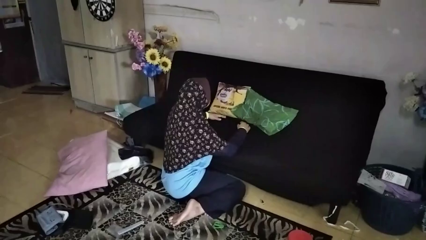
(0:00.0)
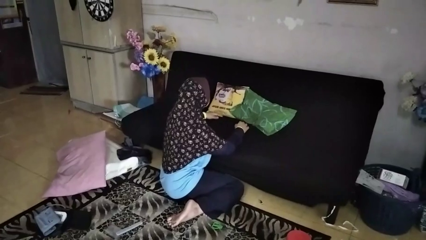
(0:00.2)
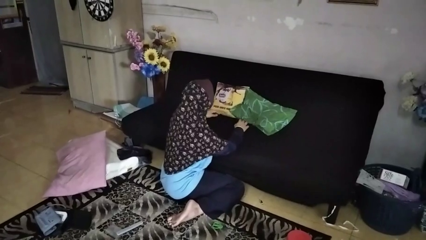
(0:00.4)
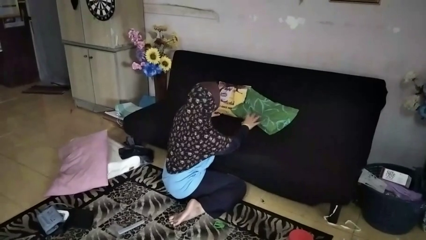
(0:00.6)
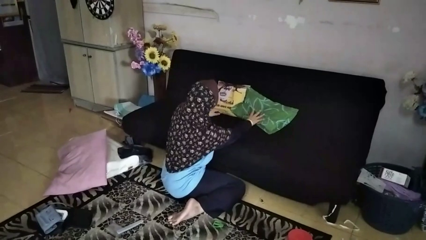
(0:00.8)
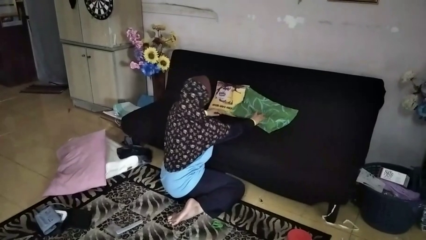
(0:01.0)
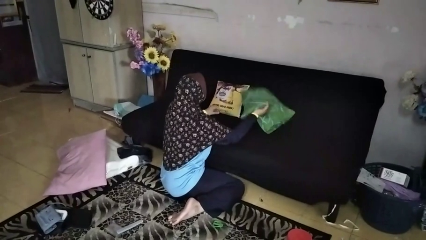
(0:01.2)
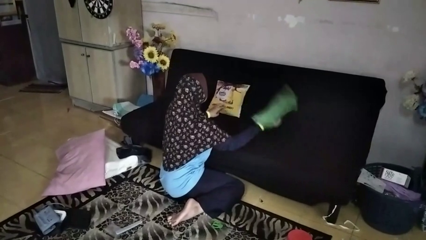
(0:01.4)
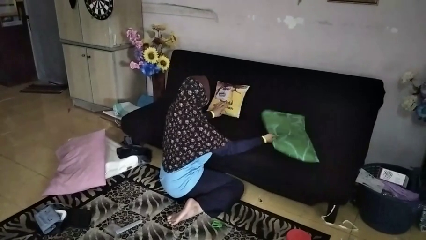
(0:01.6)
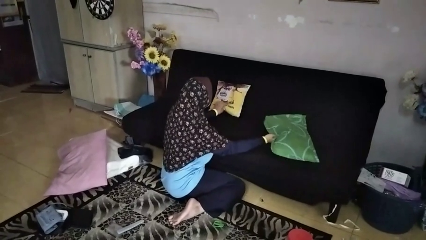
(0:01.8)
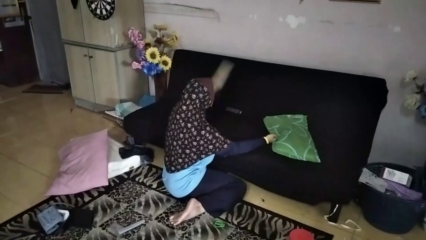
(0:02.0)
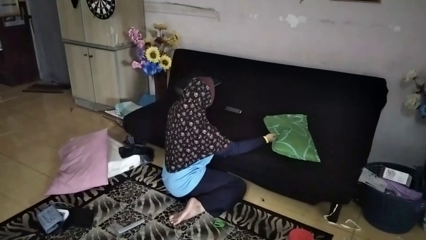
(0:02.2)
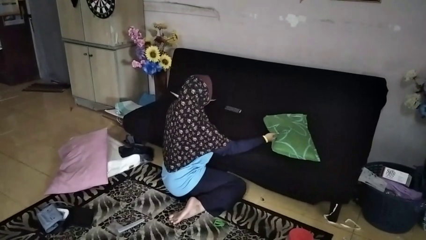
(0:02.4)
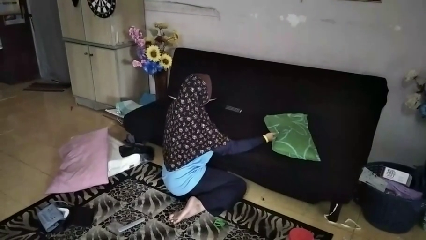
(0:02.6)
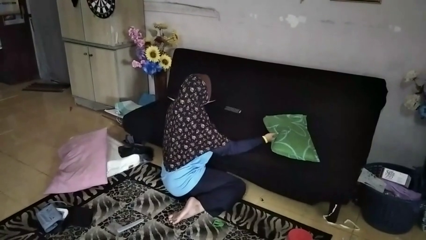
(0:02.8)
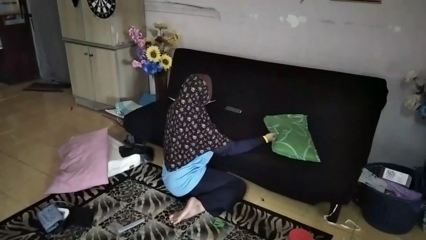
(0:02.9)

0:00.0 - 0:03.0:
person searches in couch

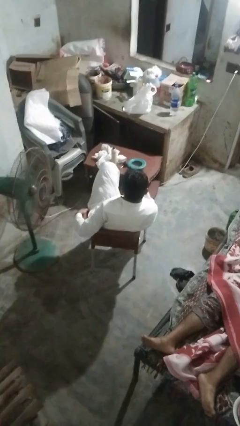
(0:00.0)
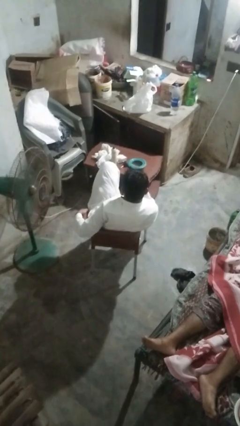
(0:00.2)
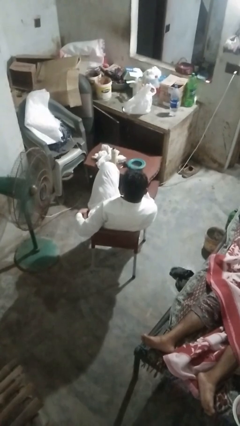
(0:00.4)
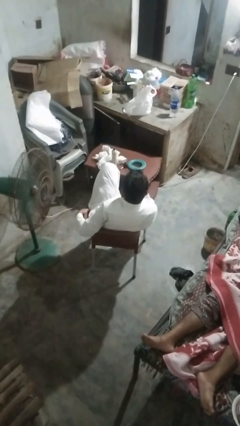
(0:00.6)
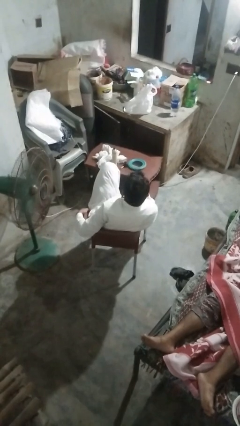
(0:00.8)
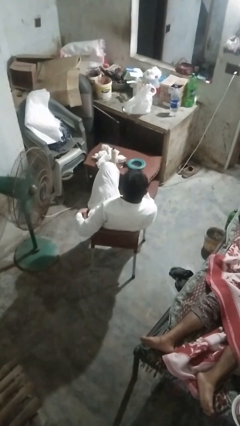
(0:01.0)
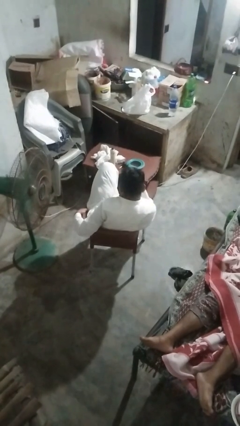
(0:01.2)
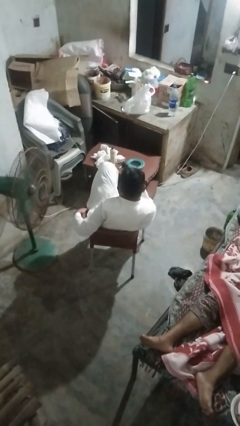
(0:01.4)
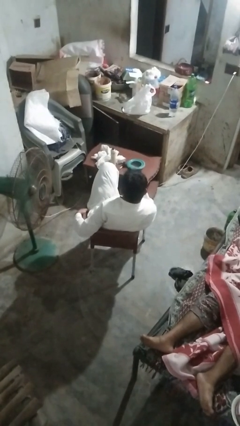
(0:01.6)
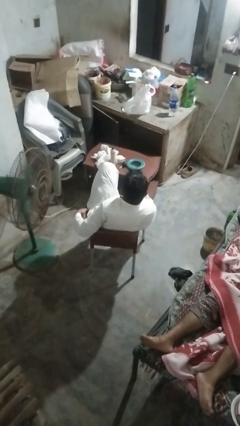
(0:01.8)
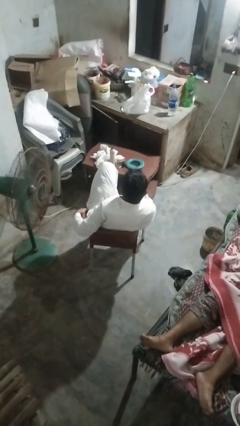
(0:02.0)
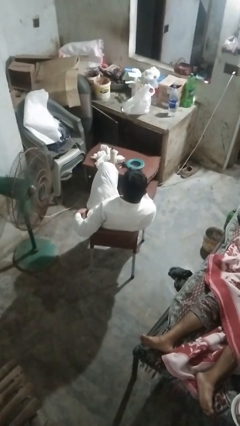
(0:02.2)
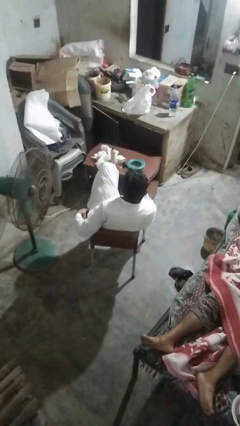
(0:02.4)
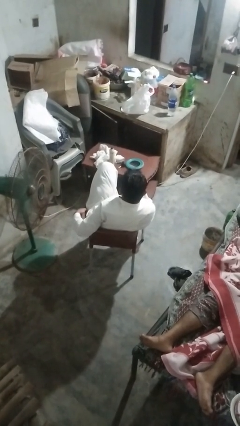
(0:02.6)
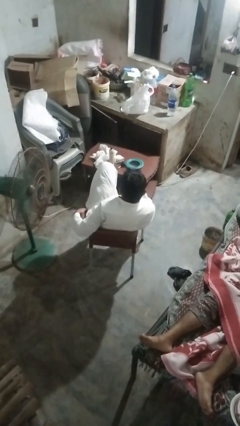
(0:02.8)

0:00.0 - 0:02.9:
person nods head

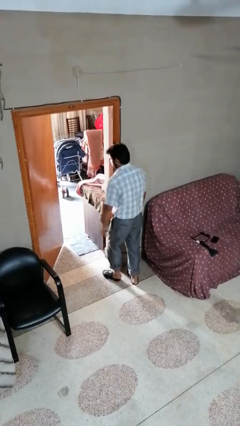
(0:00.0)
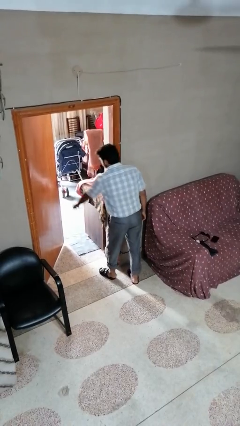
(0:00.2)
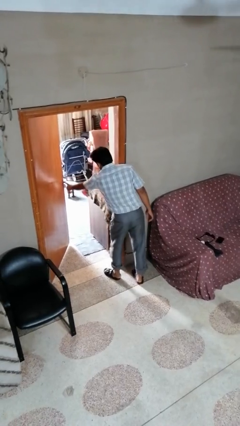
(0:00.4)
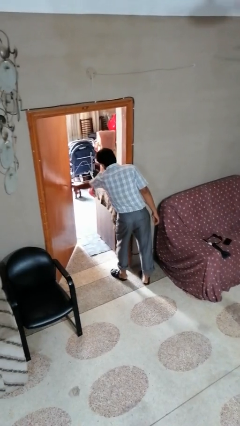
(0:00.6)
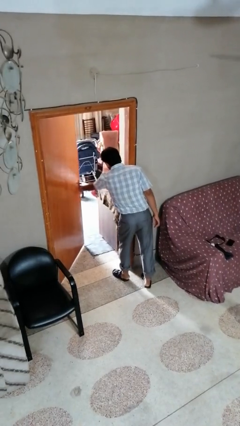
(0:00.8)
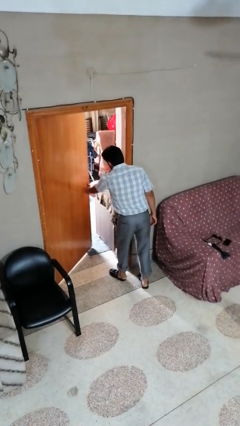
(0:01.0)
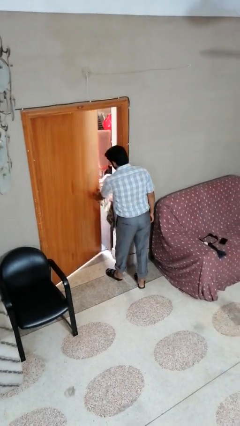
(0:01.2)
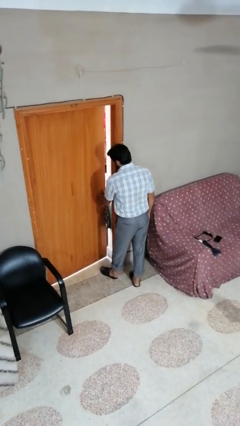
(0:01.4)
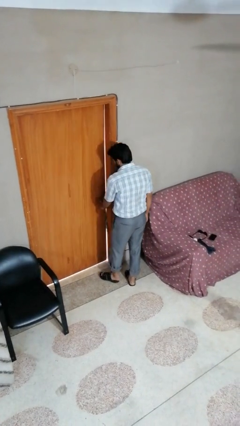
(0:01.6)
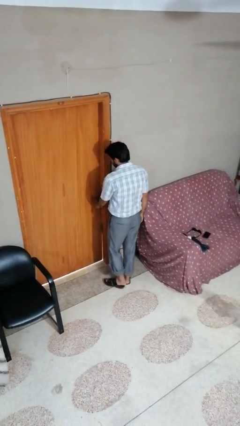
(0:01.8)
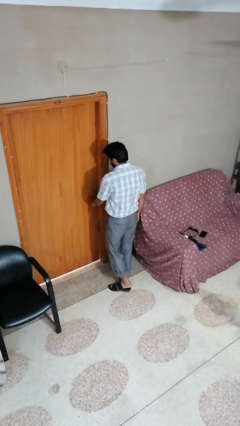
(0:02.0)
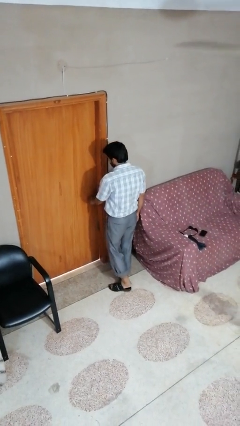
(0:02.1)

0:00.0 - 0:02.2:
person closes facility door

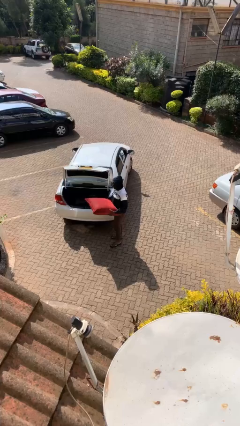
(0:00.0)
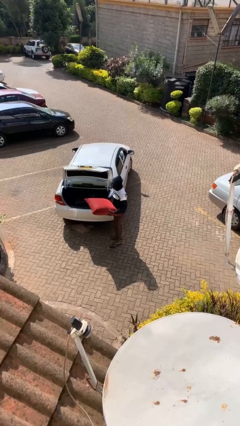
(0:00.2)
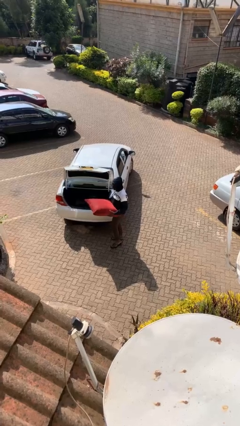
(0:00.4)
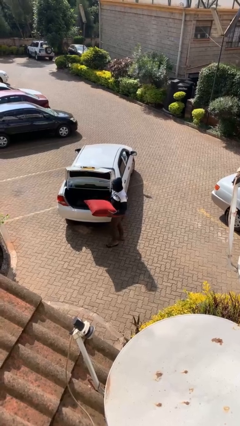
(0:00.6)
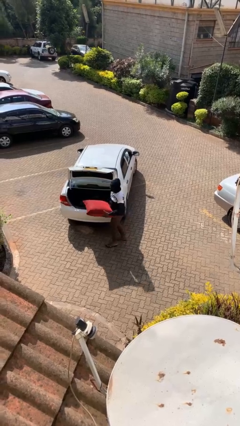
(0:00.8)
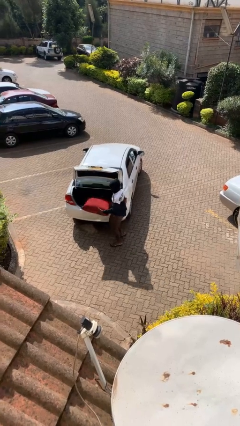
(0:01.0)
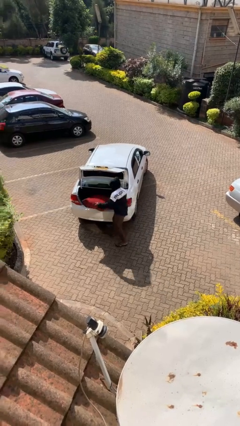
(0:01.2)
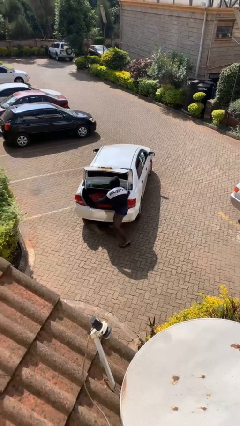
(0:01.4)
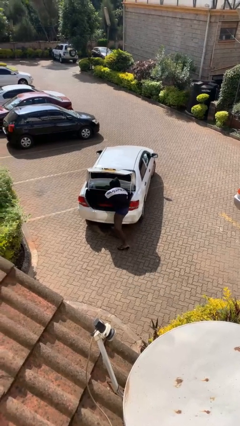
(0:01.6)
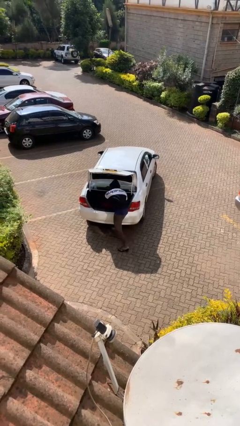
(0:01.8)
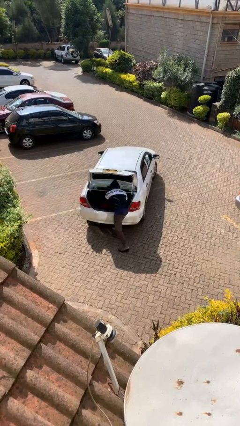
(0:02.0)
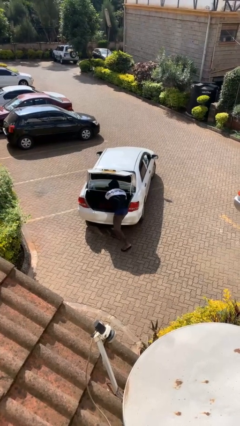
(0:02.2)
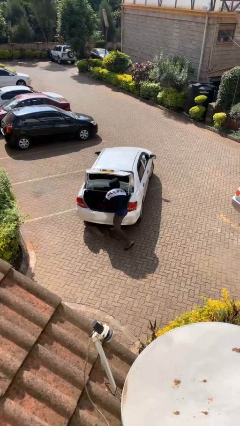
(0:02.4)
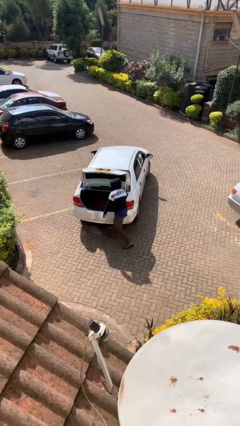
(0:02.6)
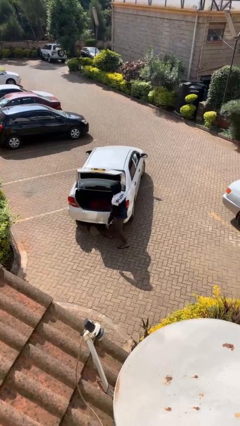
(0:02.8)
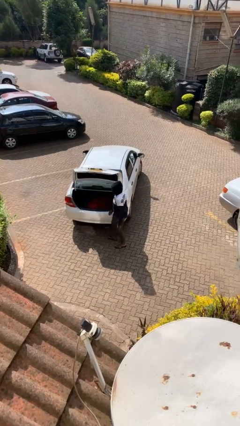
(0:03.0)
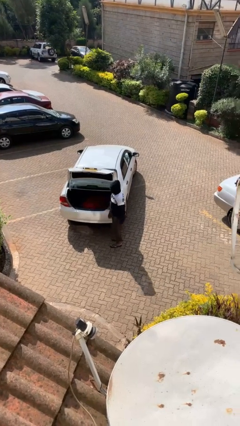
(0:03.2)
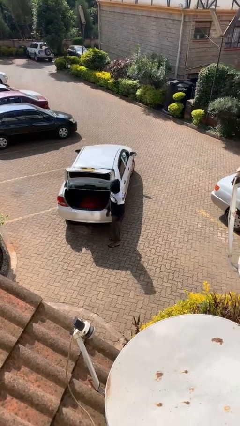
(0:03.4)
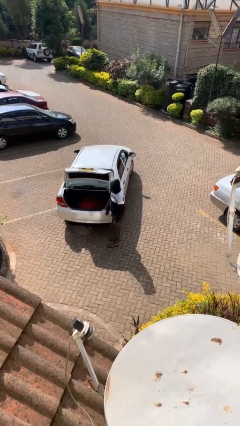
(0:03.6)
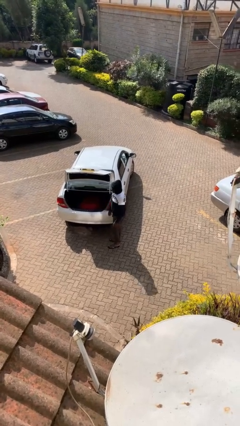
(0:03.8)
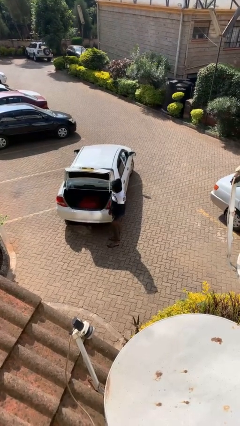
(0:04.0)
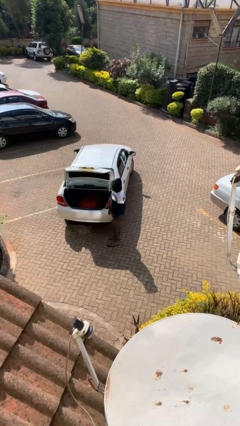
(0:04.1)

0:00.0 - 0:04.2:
person loads car

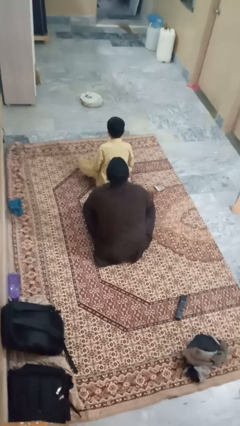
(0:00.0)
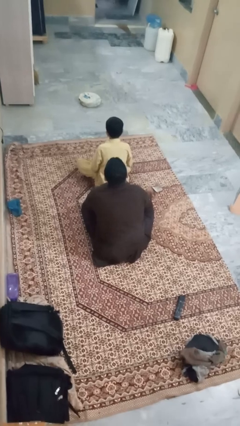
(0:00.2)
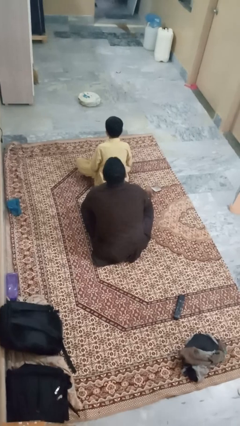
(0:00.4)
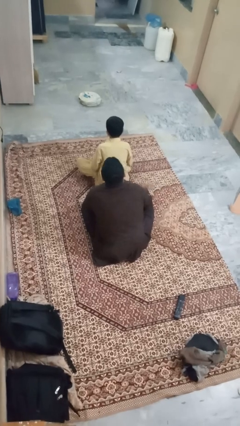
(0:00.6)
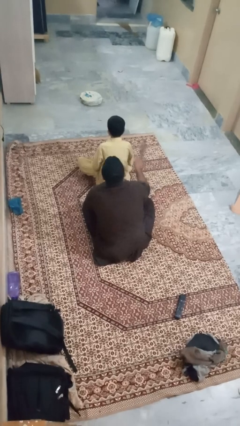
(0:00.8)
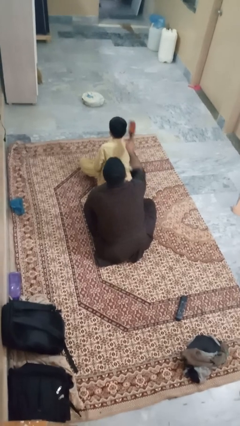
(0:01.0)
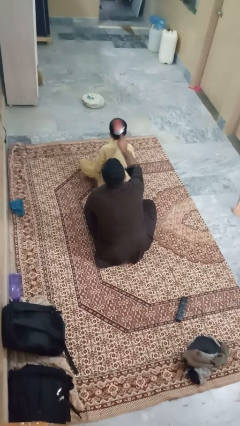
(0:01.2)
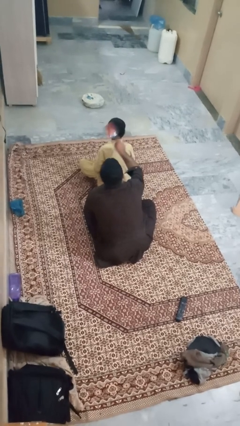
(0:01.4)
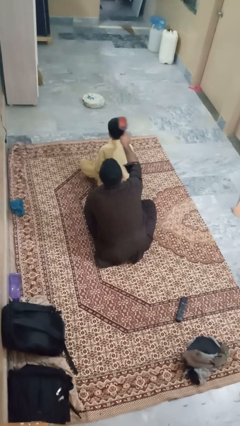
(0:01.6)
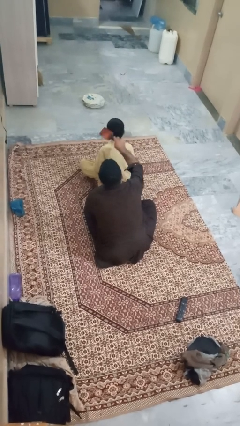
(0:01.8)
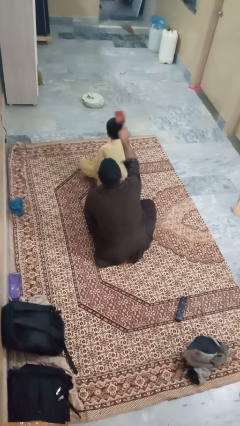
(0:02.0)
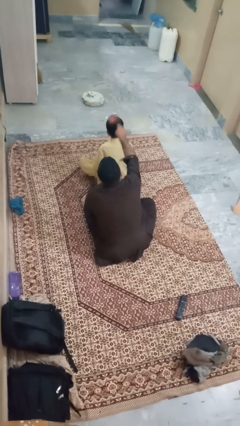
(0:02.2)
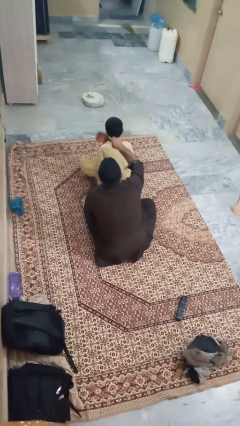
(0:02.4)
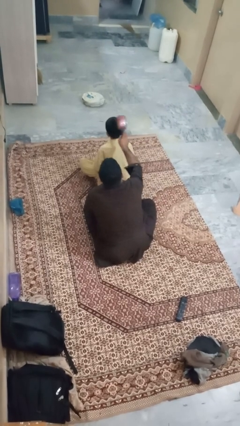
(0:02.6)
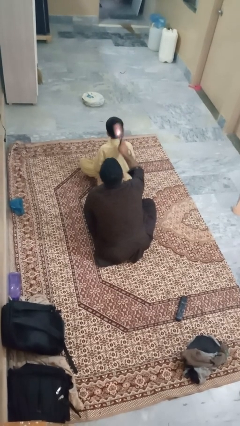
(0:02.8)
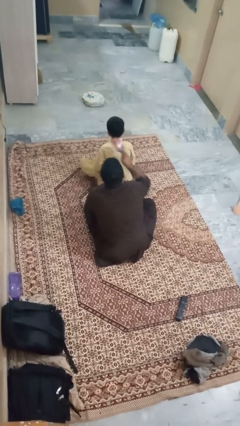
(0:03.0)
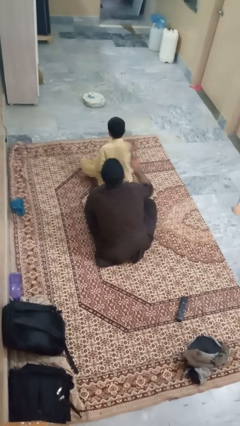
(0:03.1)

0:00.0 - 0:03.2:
person brushes hair of person

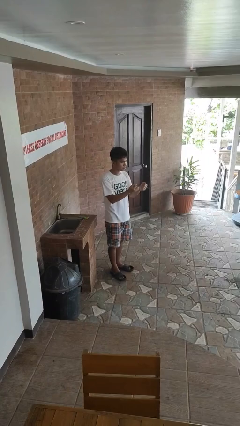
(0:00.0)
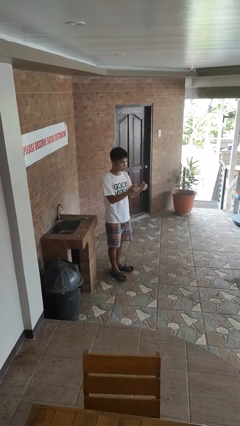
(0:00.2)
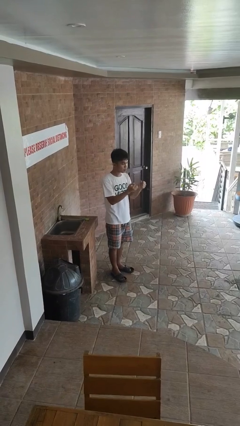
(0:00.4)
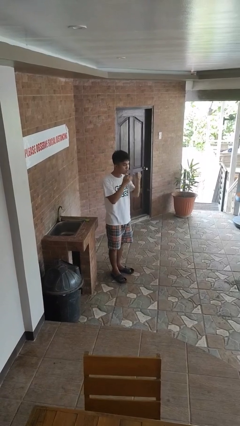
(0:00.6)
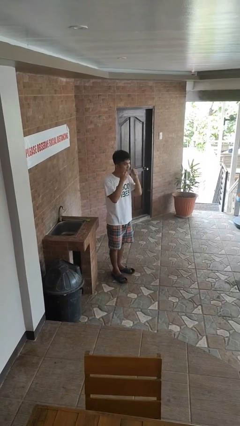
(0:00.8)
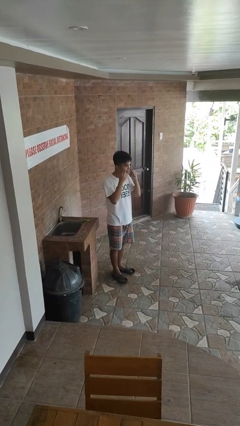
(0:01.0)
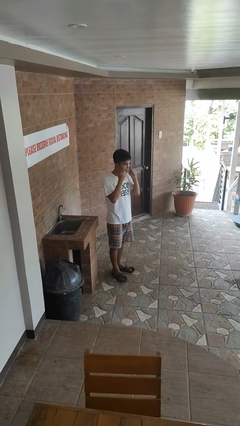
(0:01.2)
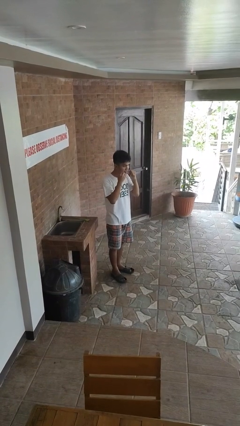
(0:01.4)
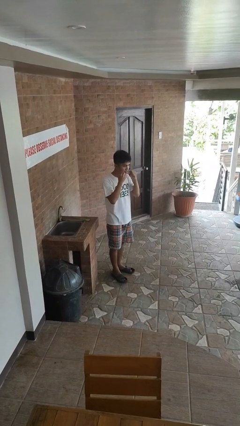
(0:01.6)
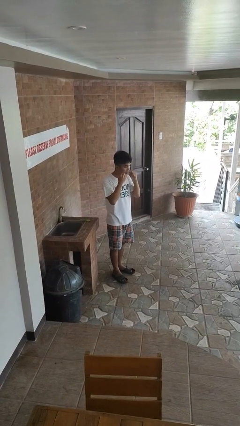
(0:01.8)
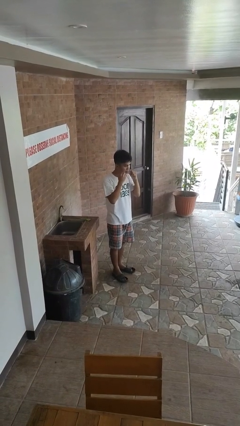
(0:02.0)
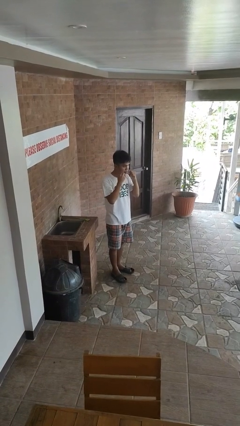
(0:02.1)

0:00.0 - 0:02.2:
person flosses
